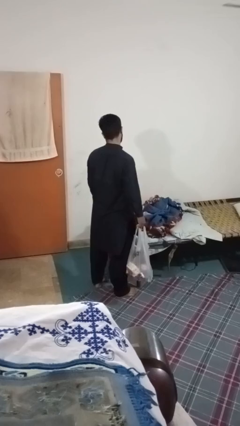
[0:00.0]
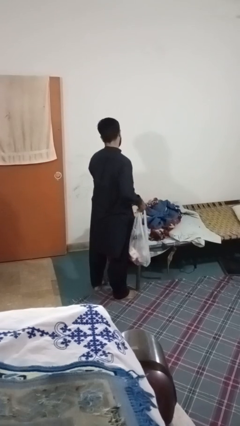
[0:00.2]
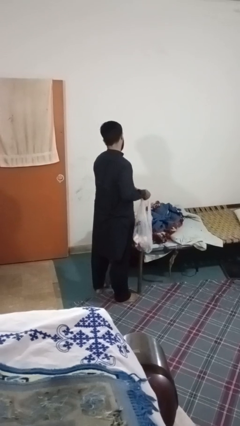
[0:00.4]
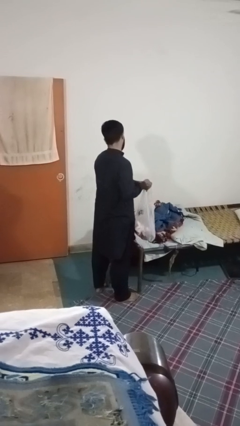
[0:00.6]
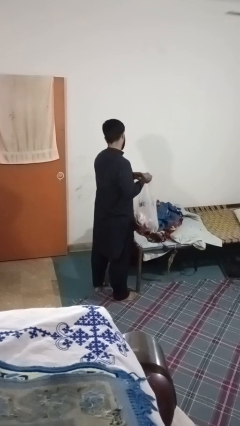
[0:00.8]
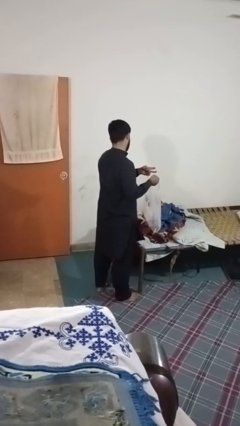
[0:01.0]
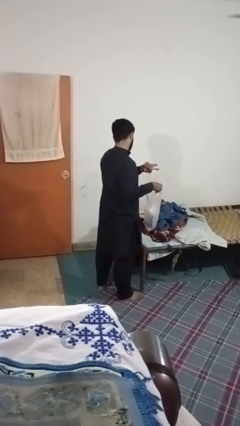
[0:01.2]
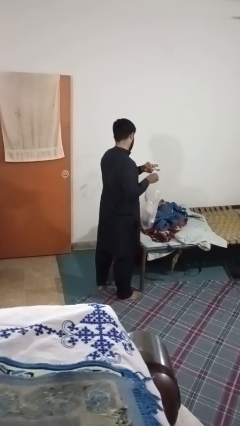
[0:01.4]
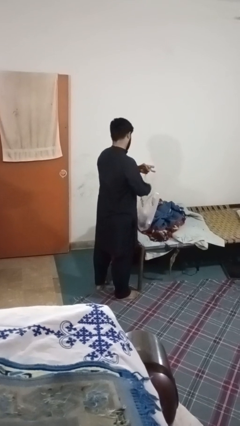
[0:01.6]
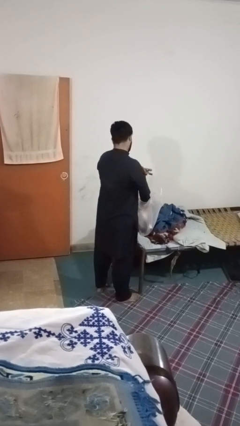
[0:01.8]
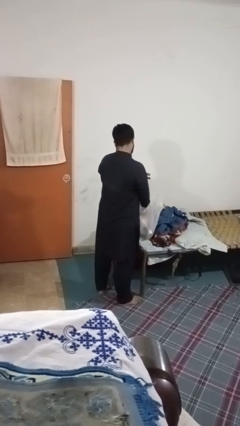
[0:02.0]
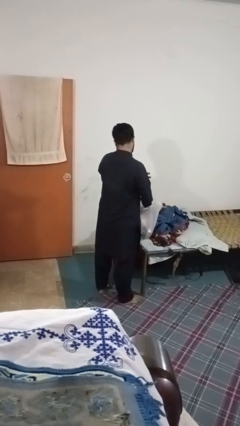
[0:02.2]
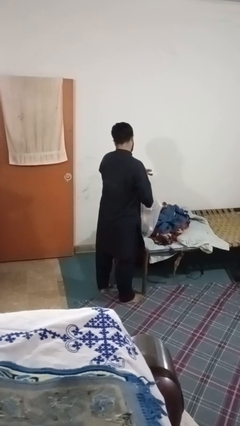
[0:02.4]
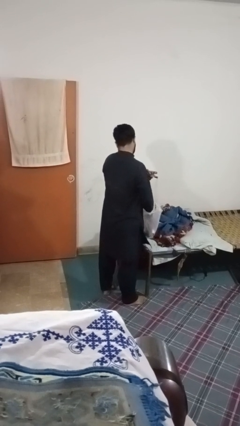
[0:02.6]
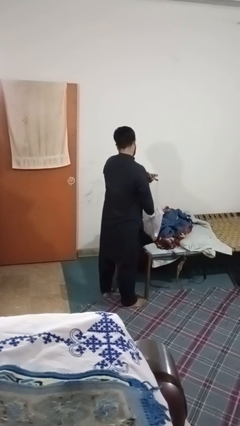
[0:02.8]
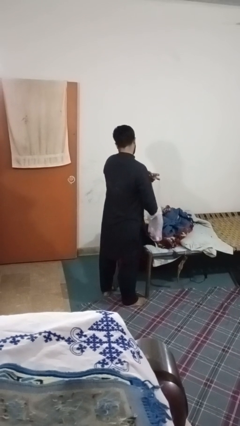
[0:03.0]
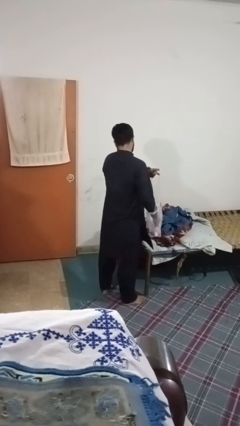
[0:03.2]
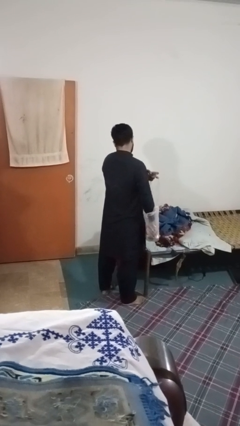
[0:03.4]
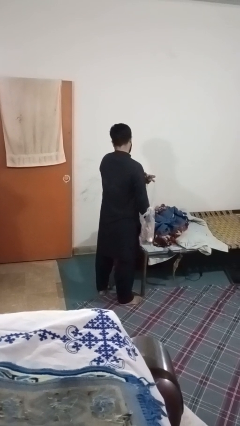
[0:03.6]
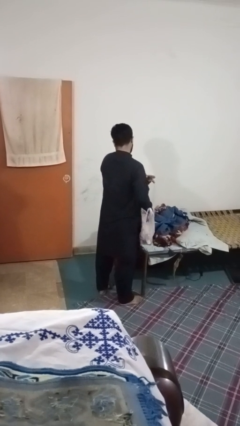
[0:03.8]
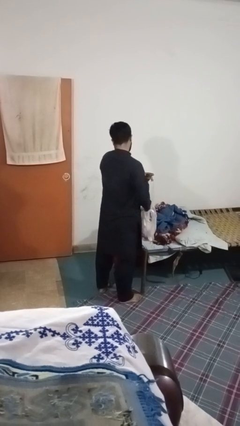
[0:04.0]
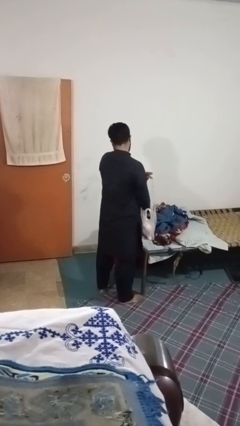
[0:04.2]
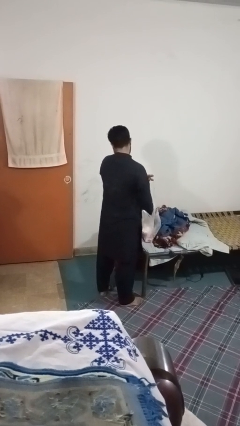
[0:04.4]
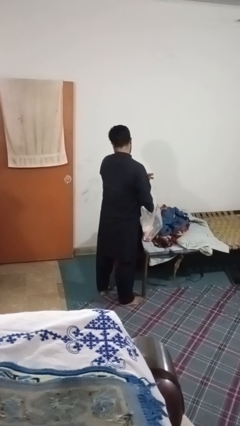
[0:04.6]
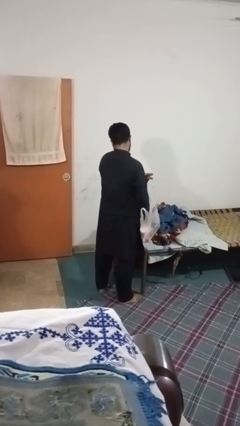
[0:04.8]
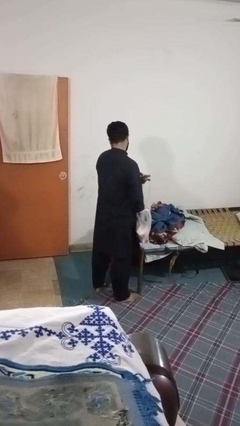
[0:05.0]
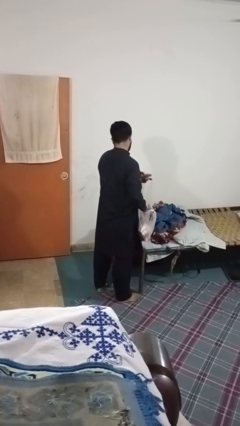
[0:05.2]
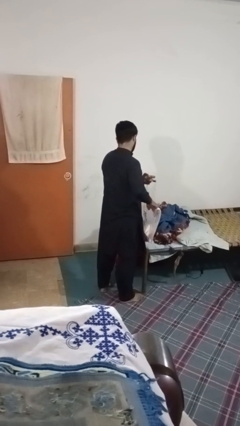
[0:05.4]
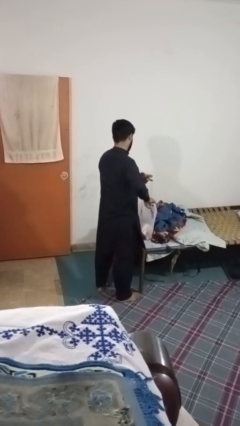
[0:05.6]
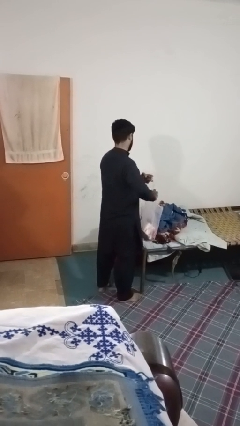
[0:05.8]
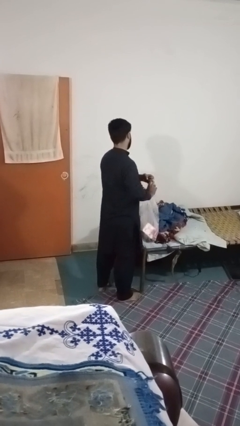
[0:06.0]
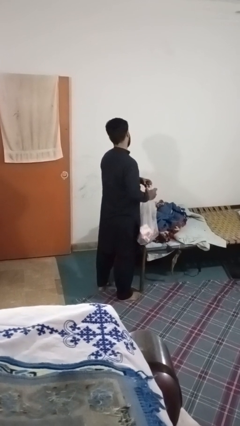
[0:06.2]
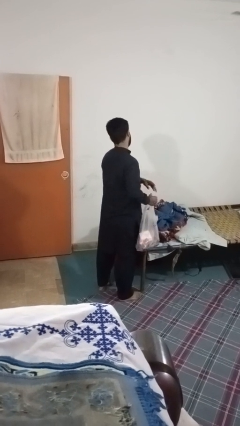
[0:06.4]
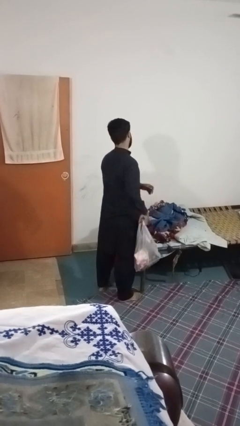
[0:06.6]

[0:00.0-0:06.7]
person searches in bag

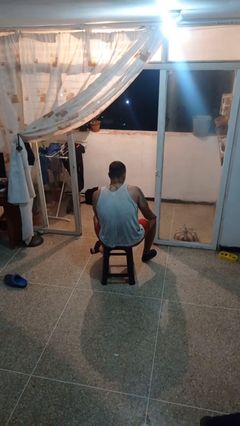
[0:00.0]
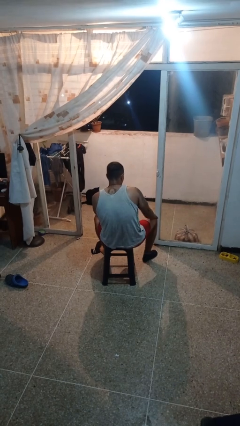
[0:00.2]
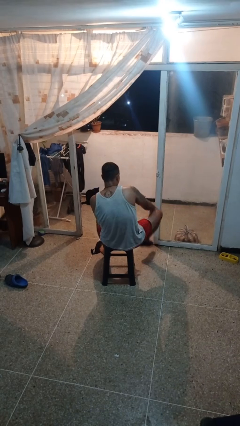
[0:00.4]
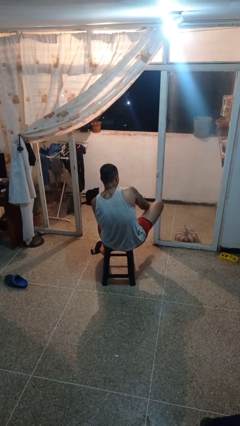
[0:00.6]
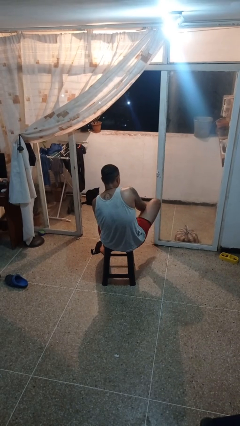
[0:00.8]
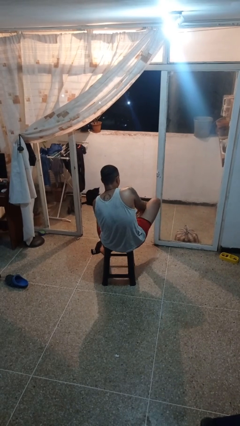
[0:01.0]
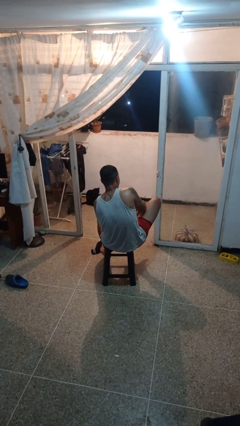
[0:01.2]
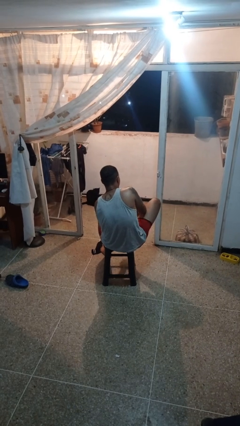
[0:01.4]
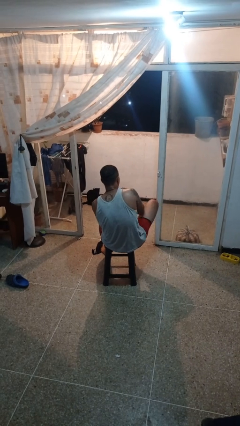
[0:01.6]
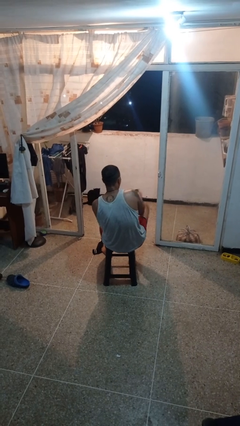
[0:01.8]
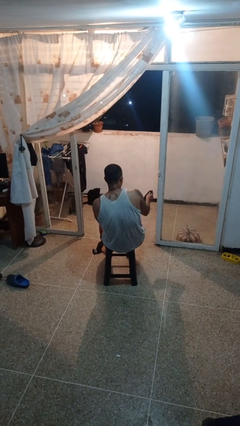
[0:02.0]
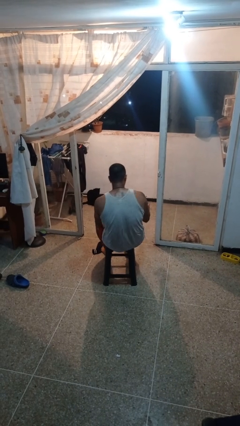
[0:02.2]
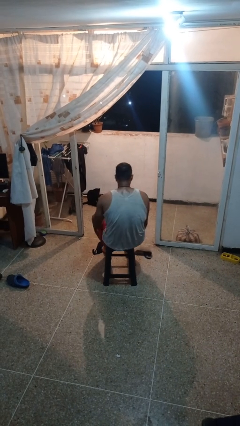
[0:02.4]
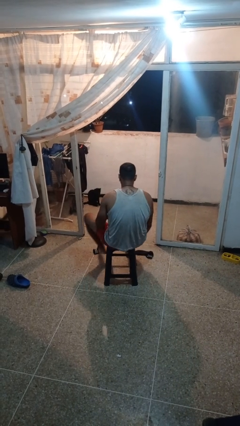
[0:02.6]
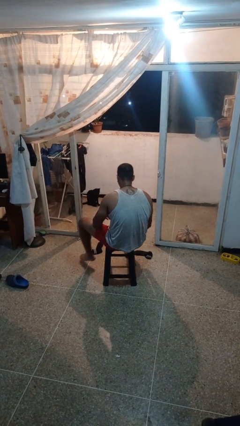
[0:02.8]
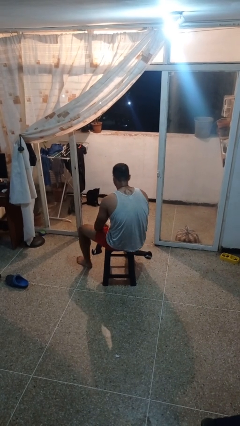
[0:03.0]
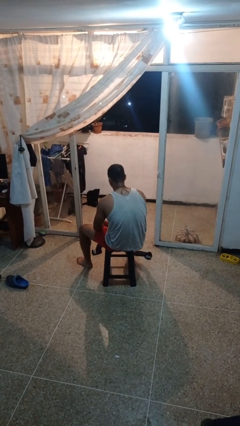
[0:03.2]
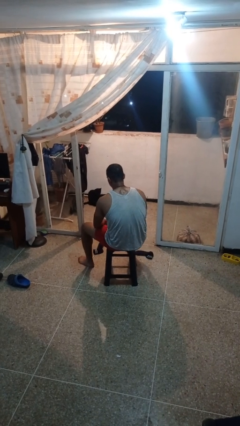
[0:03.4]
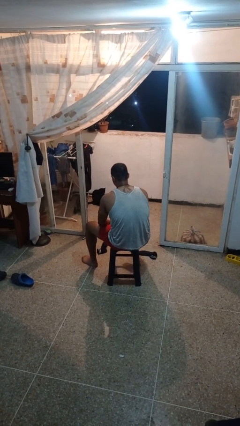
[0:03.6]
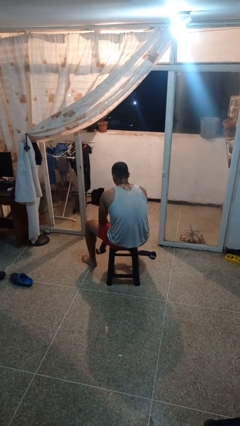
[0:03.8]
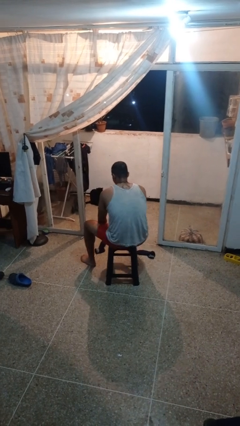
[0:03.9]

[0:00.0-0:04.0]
person takes off socks

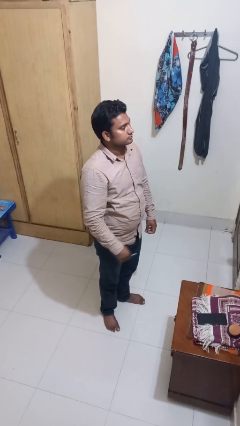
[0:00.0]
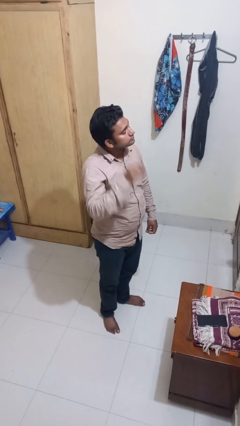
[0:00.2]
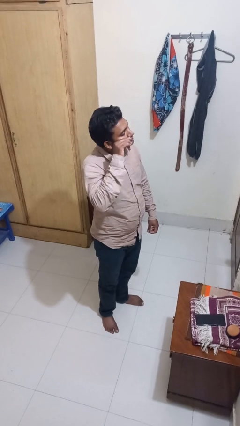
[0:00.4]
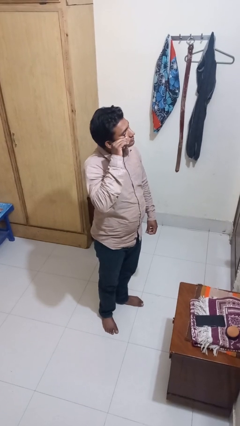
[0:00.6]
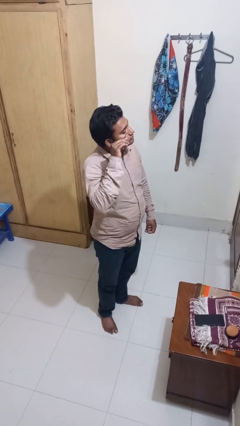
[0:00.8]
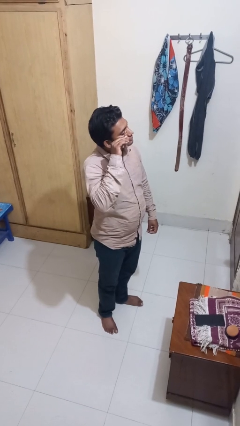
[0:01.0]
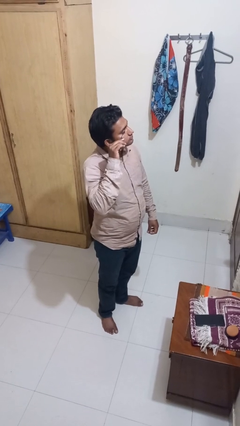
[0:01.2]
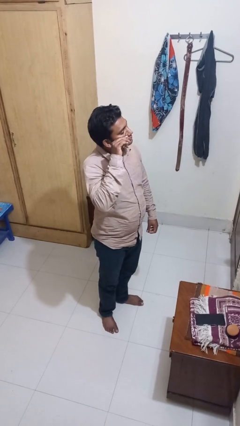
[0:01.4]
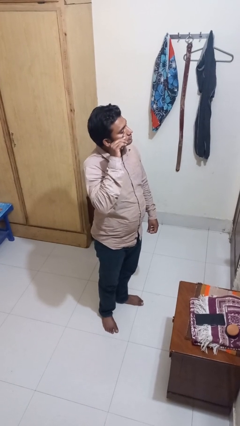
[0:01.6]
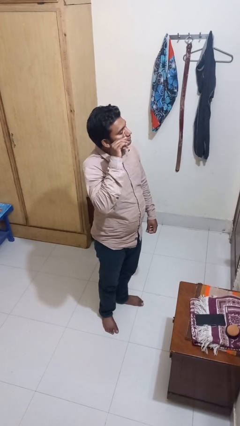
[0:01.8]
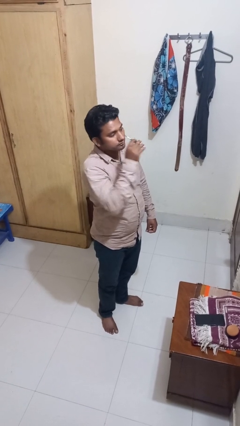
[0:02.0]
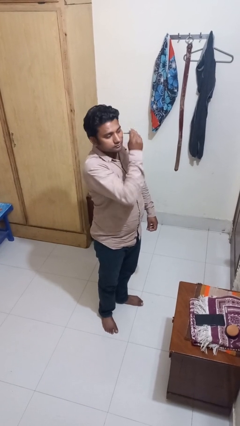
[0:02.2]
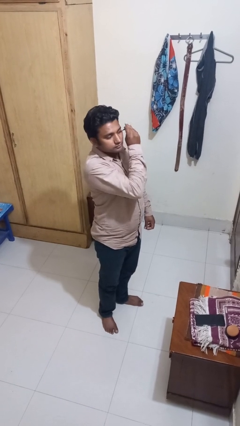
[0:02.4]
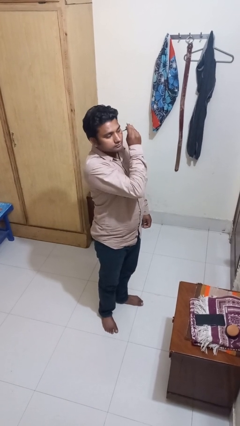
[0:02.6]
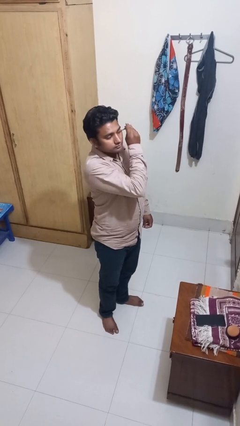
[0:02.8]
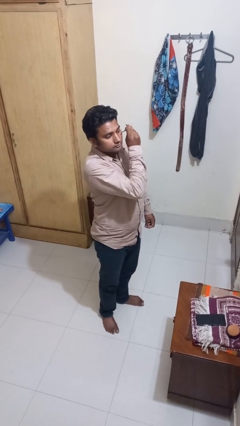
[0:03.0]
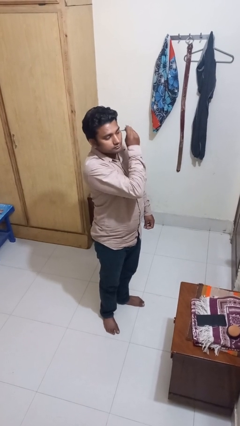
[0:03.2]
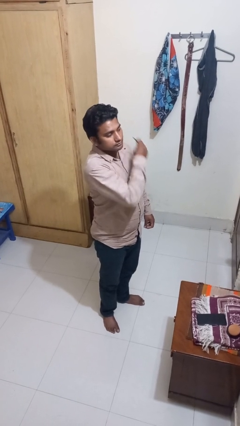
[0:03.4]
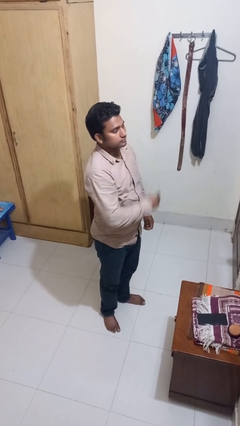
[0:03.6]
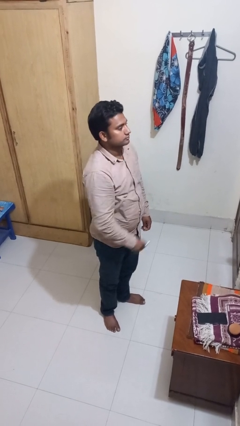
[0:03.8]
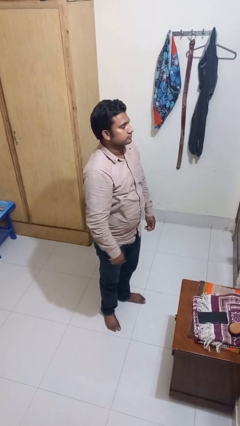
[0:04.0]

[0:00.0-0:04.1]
person applies eye makeup

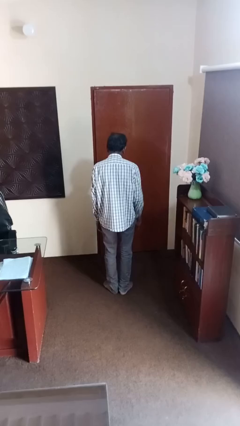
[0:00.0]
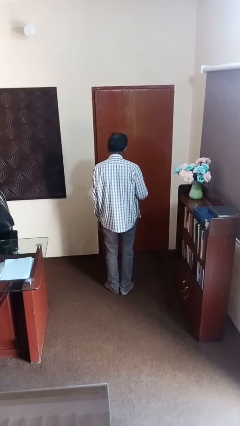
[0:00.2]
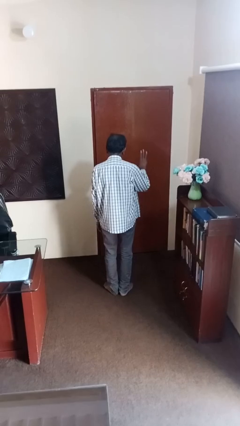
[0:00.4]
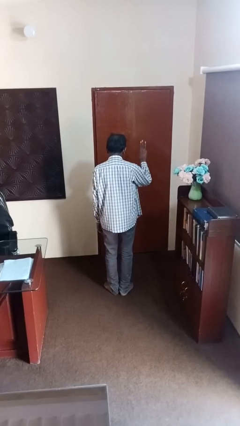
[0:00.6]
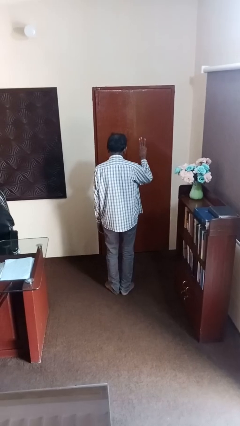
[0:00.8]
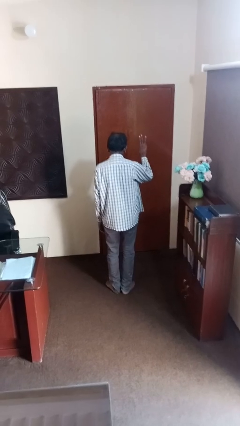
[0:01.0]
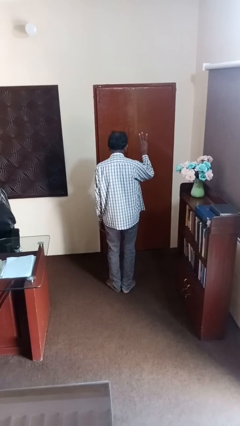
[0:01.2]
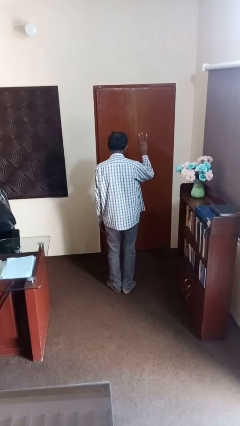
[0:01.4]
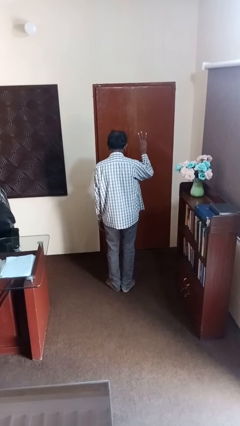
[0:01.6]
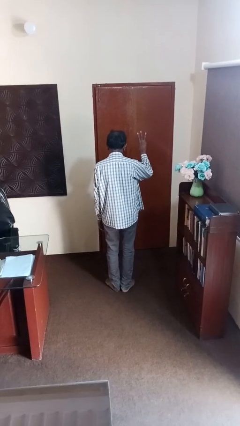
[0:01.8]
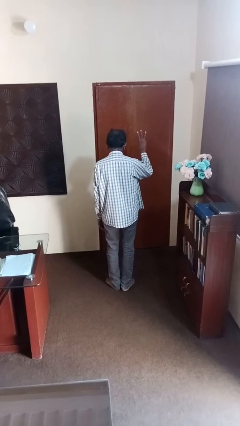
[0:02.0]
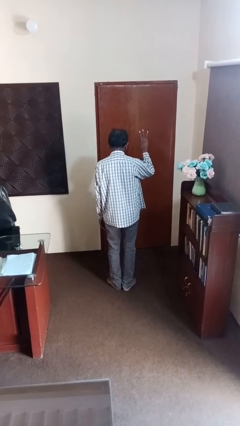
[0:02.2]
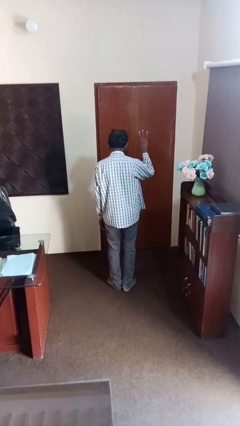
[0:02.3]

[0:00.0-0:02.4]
person gestures number three

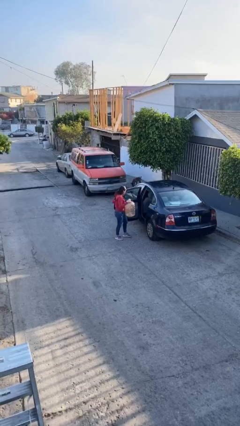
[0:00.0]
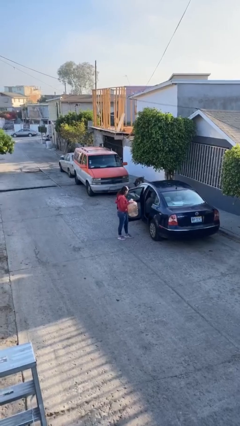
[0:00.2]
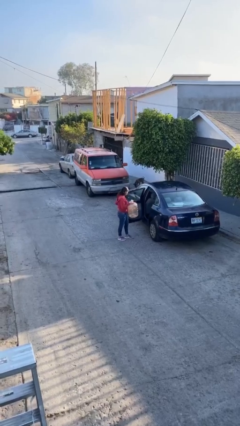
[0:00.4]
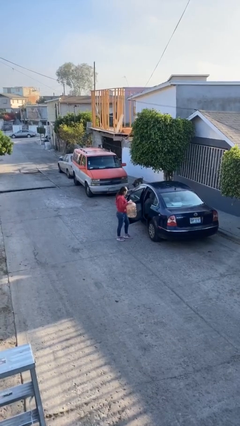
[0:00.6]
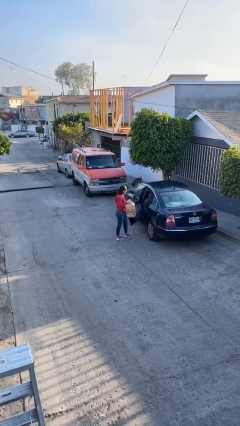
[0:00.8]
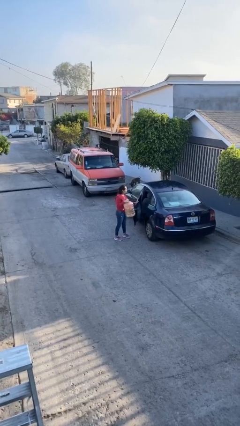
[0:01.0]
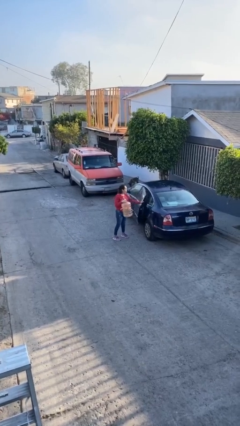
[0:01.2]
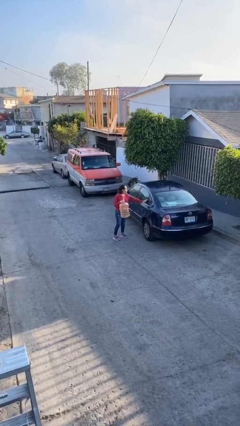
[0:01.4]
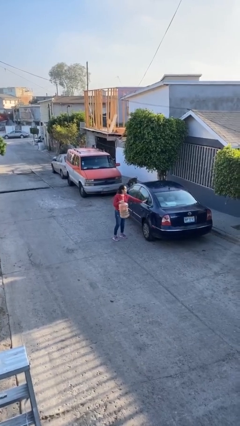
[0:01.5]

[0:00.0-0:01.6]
person closes car door
